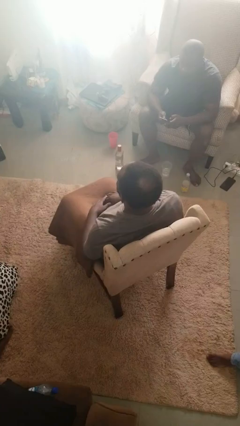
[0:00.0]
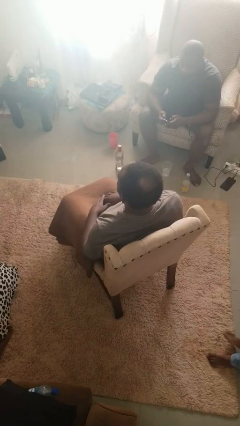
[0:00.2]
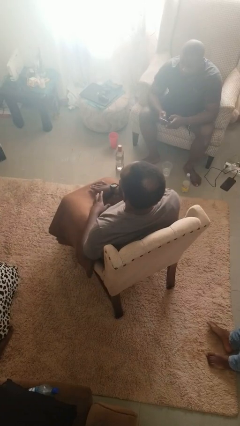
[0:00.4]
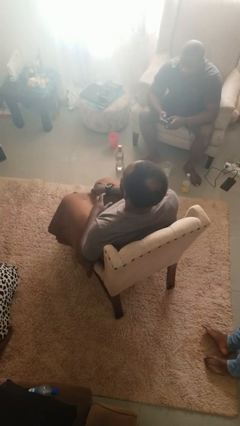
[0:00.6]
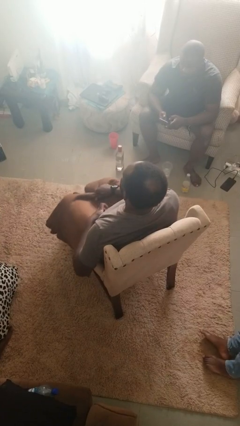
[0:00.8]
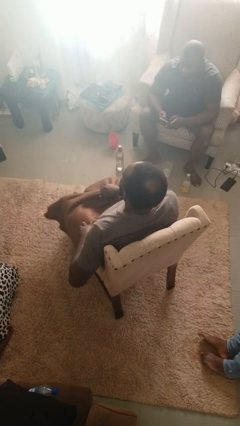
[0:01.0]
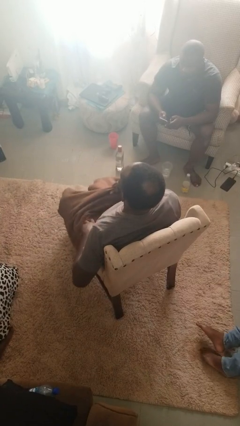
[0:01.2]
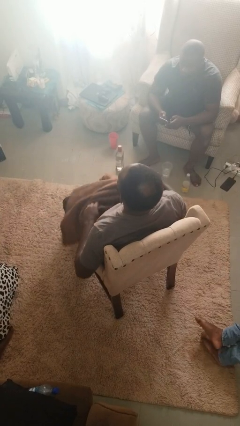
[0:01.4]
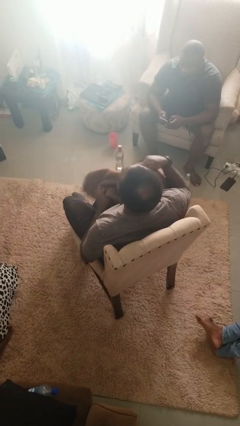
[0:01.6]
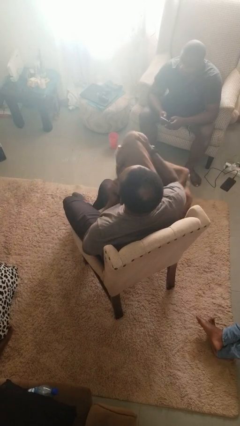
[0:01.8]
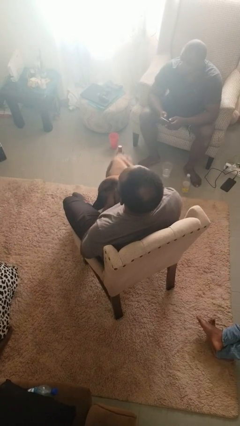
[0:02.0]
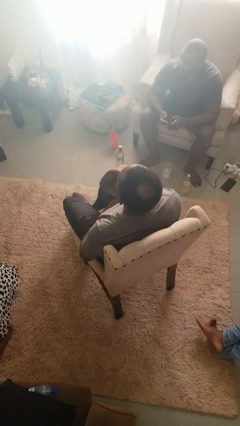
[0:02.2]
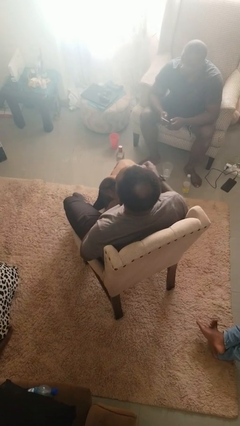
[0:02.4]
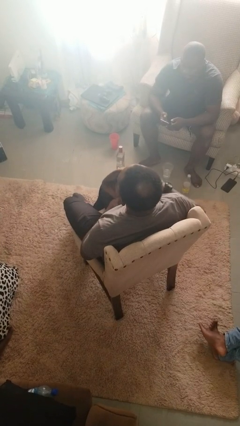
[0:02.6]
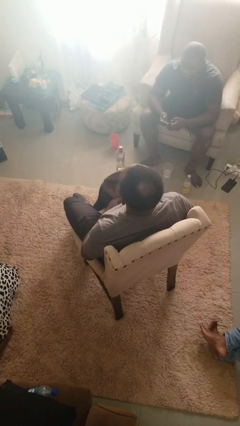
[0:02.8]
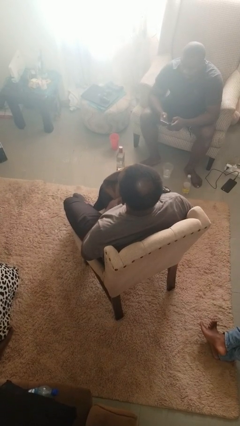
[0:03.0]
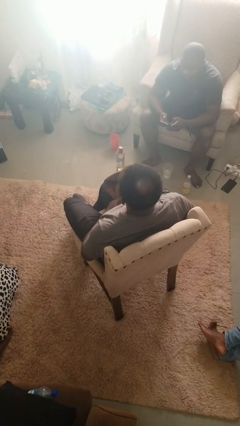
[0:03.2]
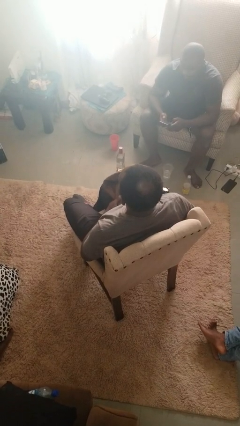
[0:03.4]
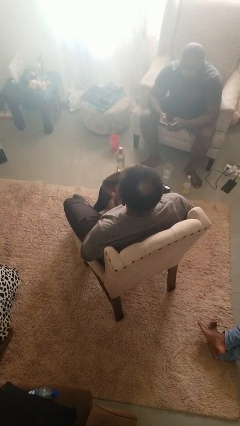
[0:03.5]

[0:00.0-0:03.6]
person uncovers with blanket

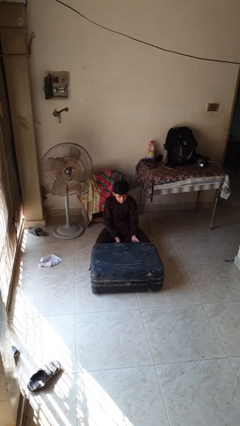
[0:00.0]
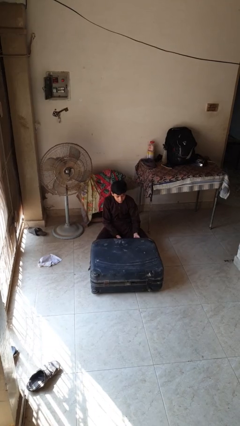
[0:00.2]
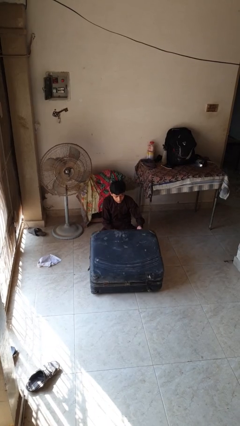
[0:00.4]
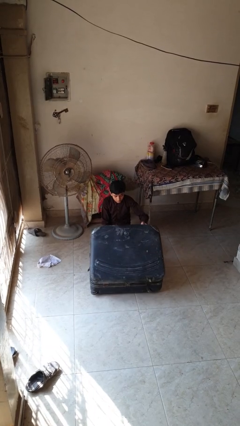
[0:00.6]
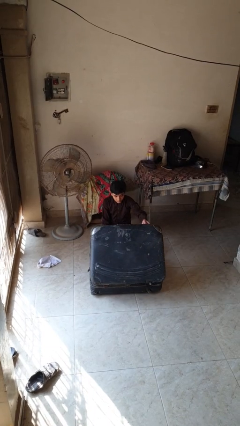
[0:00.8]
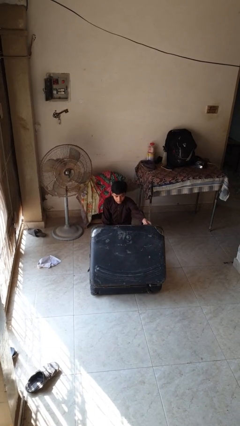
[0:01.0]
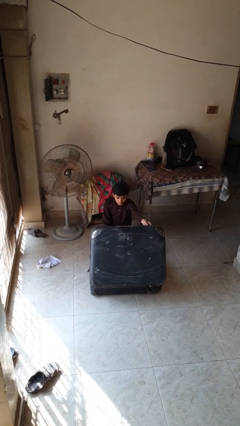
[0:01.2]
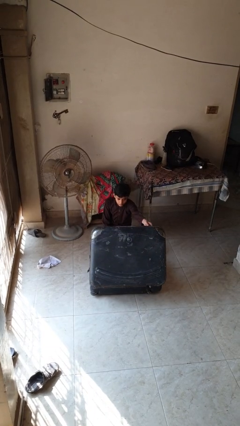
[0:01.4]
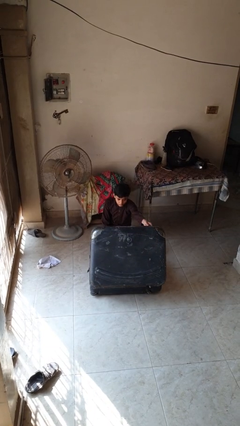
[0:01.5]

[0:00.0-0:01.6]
person opens suitcase

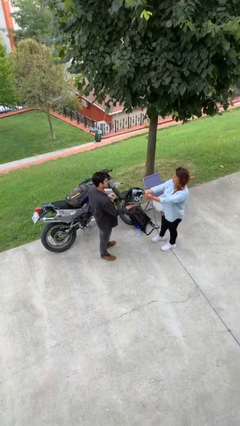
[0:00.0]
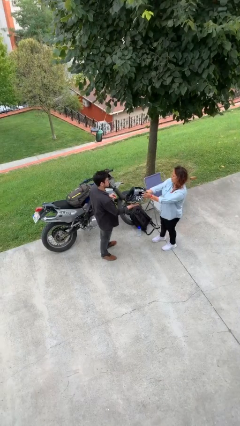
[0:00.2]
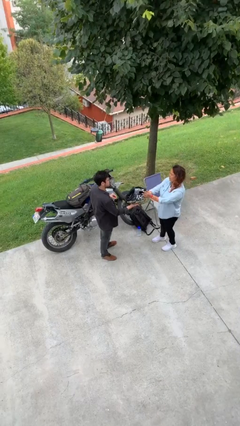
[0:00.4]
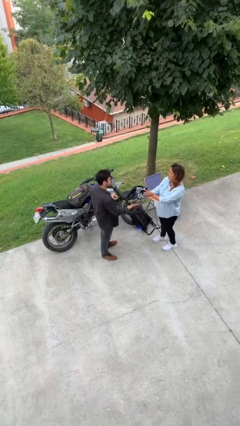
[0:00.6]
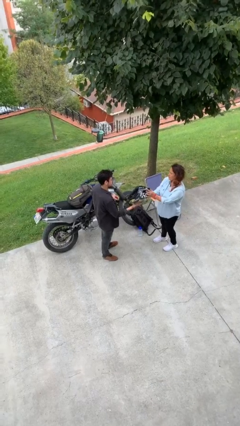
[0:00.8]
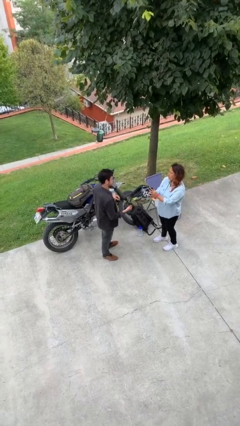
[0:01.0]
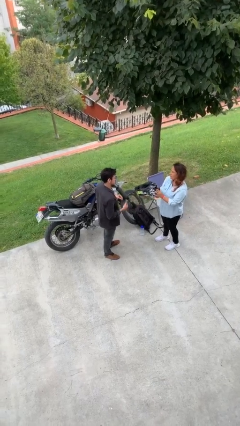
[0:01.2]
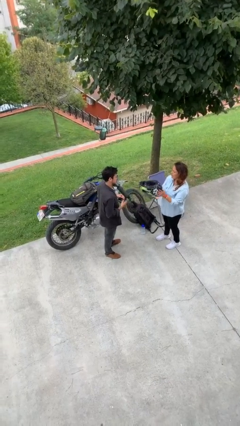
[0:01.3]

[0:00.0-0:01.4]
person transfers object to person

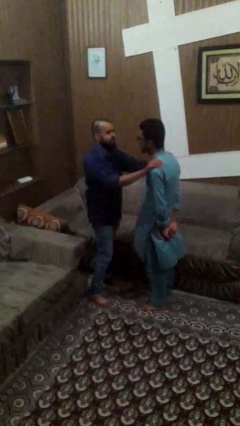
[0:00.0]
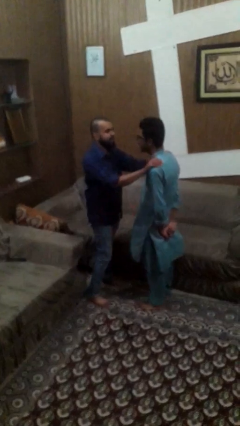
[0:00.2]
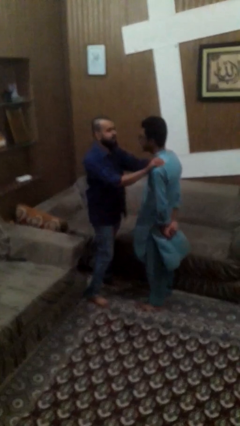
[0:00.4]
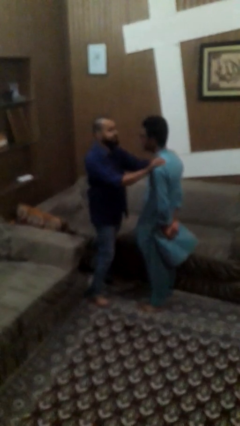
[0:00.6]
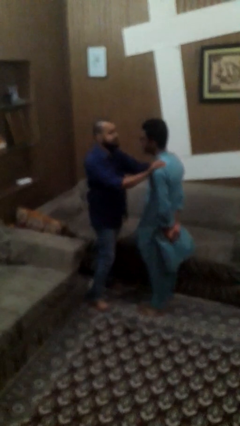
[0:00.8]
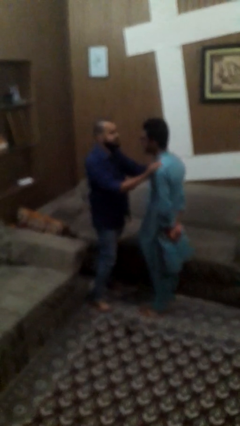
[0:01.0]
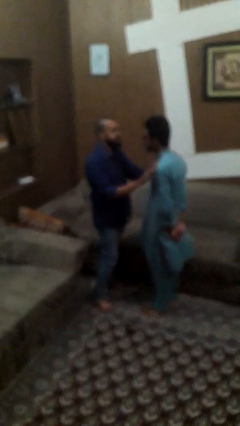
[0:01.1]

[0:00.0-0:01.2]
person pounds shoulders of person

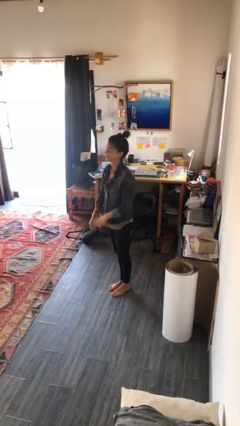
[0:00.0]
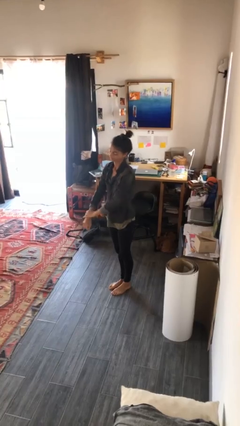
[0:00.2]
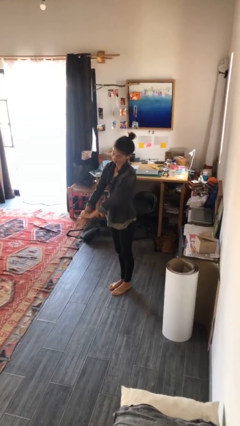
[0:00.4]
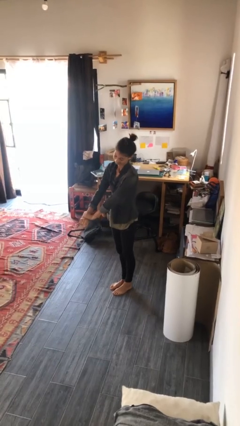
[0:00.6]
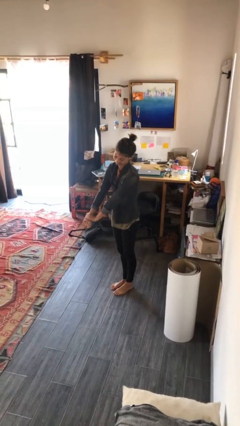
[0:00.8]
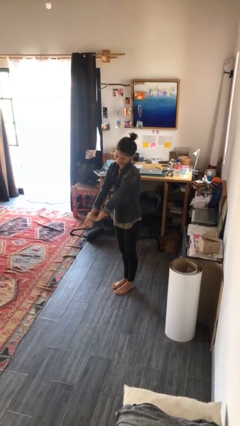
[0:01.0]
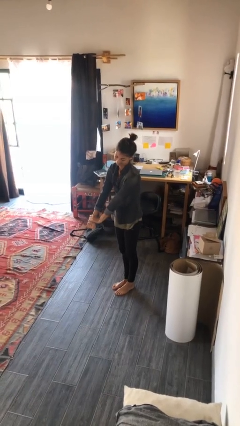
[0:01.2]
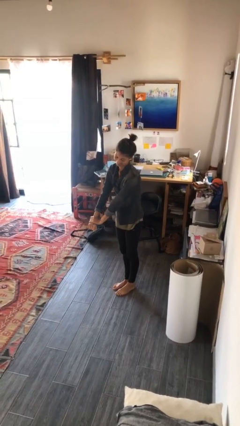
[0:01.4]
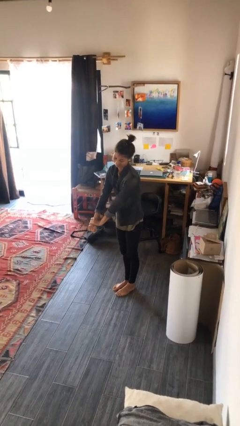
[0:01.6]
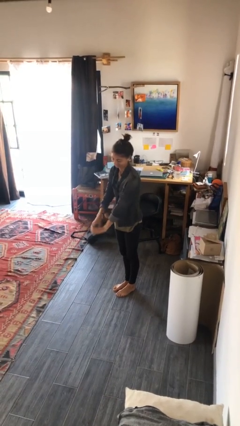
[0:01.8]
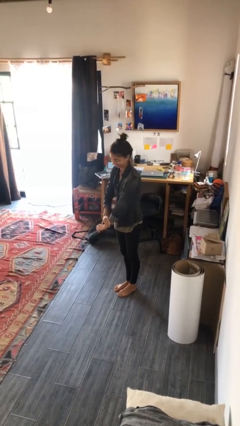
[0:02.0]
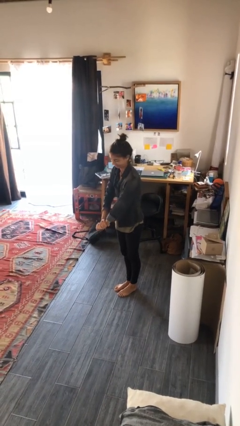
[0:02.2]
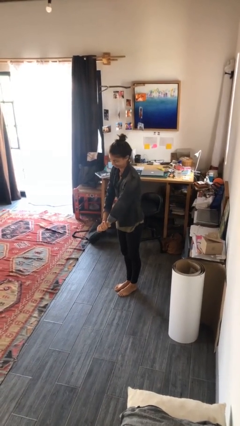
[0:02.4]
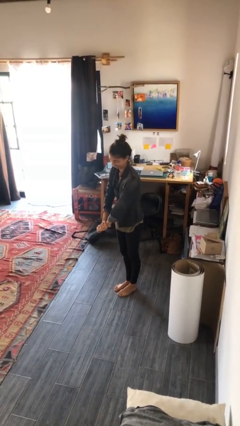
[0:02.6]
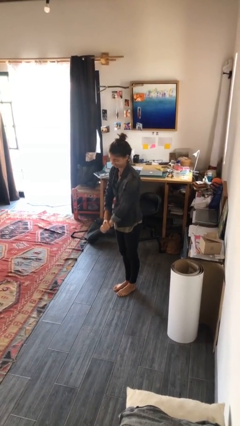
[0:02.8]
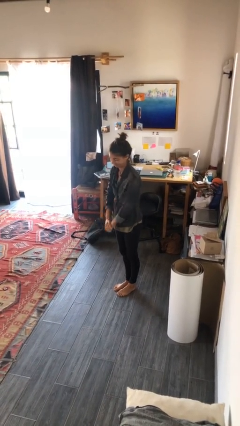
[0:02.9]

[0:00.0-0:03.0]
person stretches arms to side

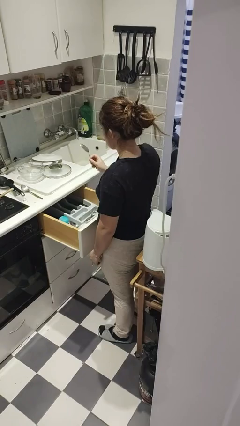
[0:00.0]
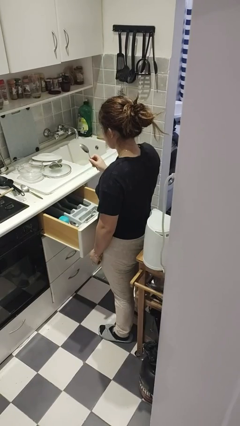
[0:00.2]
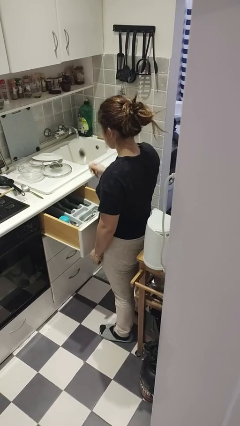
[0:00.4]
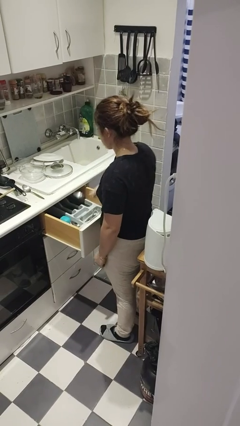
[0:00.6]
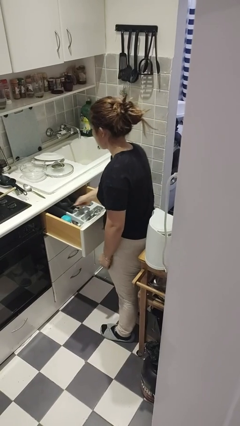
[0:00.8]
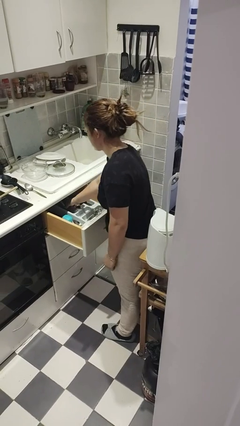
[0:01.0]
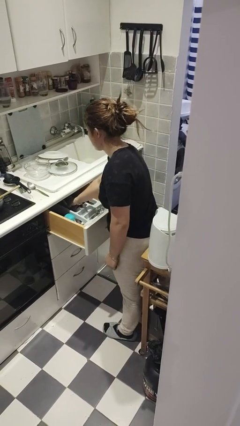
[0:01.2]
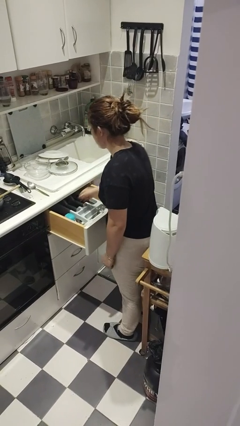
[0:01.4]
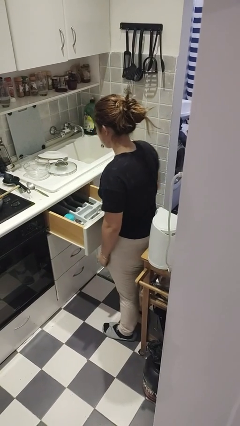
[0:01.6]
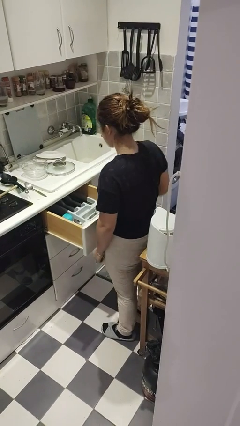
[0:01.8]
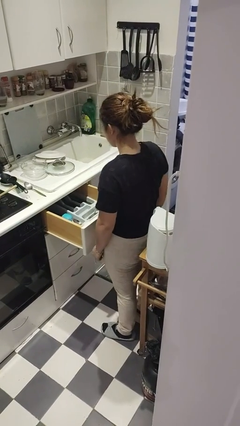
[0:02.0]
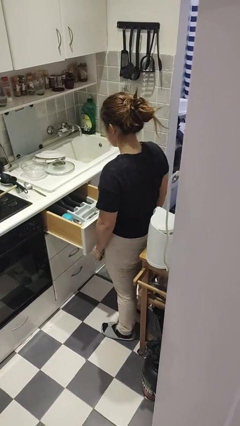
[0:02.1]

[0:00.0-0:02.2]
person puts object into kitchen drawer

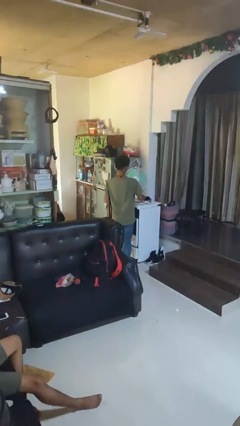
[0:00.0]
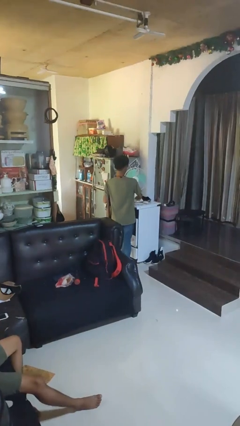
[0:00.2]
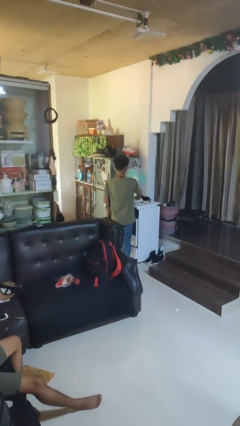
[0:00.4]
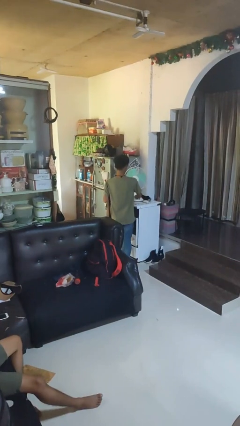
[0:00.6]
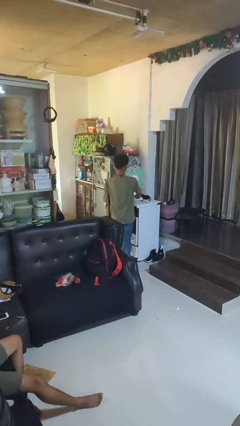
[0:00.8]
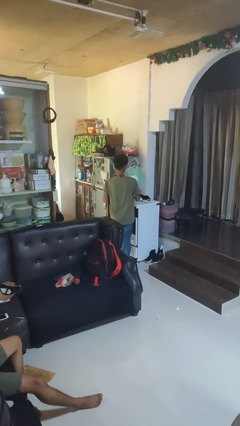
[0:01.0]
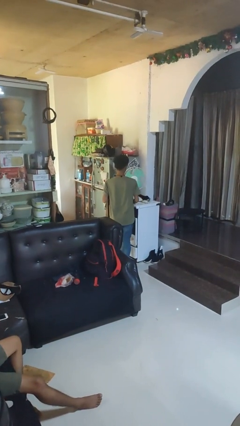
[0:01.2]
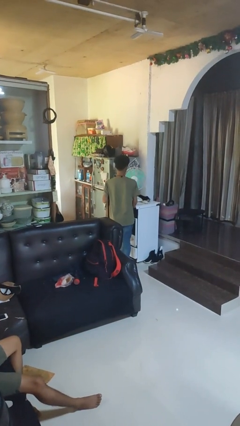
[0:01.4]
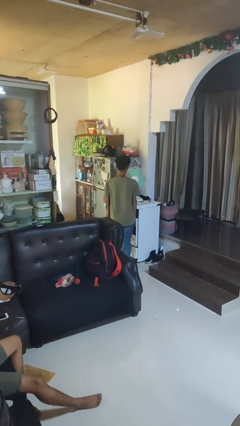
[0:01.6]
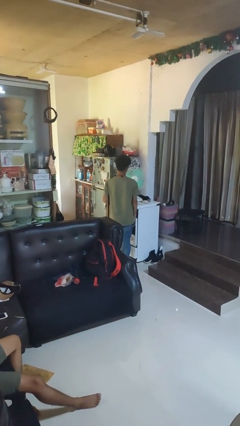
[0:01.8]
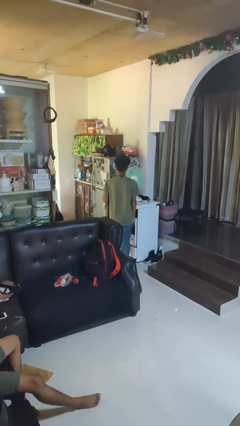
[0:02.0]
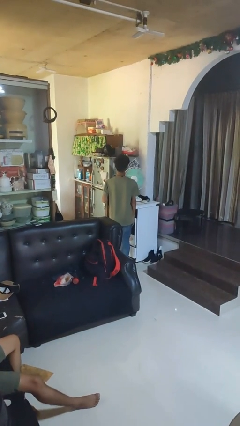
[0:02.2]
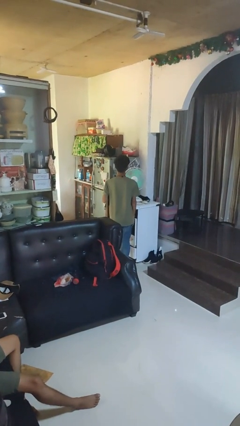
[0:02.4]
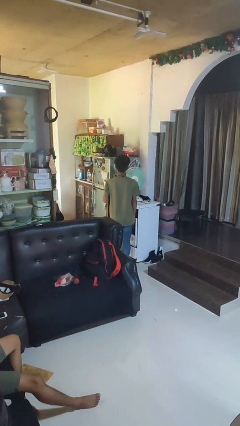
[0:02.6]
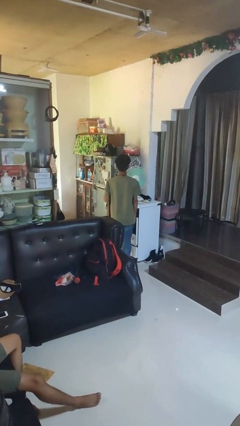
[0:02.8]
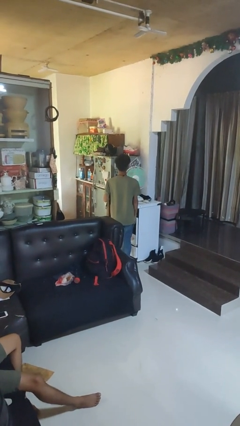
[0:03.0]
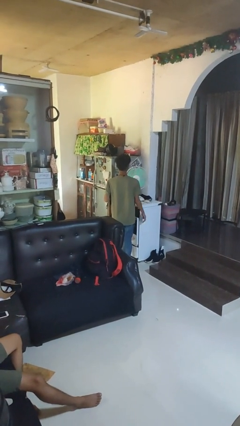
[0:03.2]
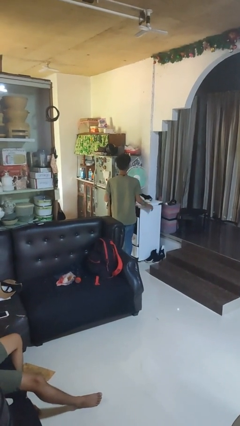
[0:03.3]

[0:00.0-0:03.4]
person turns on fan

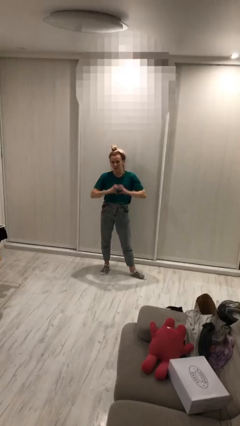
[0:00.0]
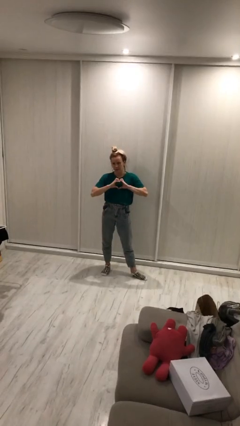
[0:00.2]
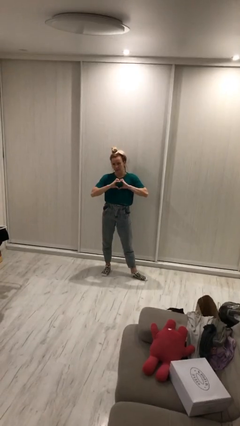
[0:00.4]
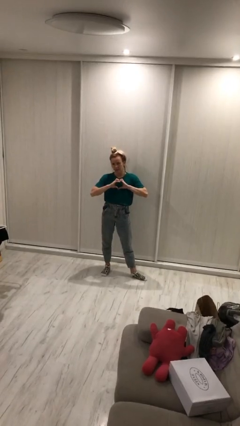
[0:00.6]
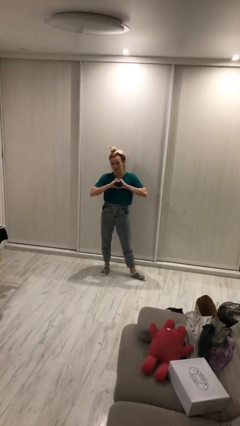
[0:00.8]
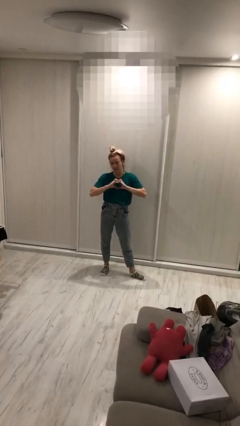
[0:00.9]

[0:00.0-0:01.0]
person gestures heart
